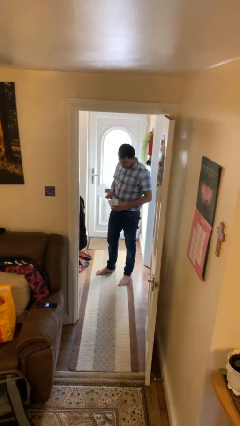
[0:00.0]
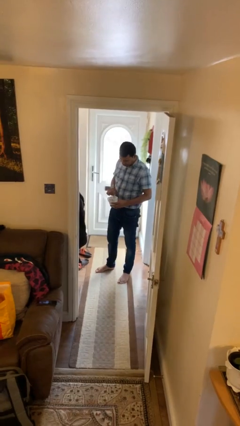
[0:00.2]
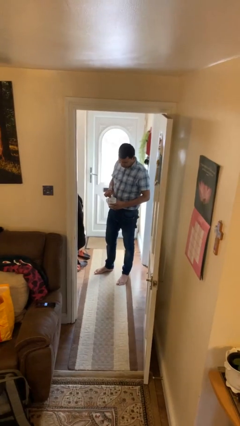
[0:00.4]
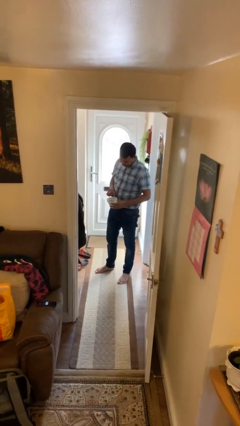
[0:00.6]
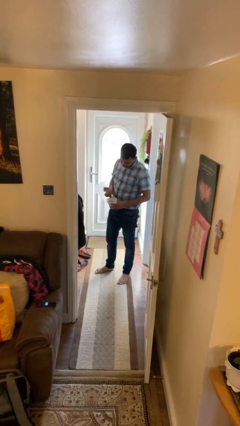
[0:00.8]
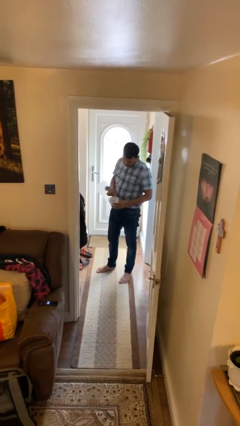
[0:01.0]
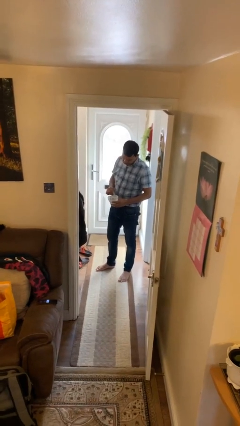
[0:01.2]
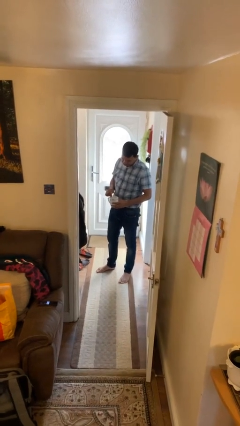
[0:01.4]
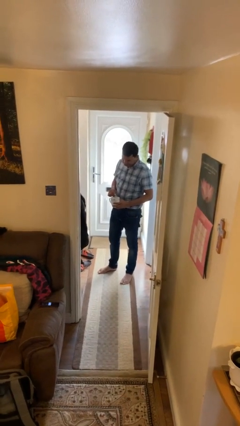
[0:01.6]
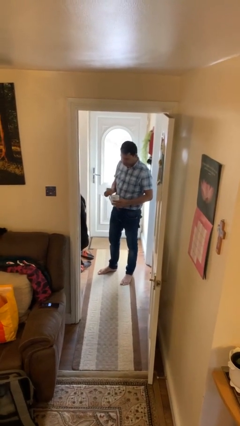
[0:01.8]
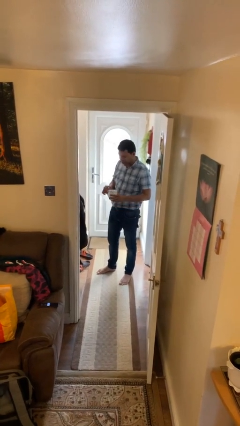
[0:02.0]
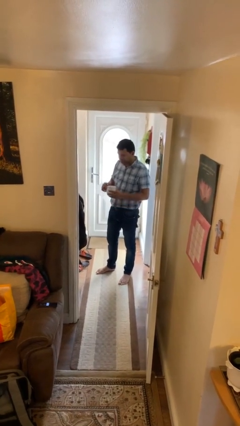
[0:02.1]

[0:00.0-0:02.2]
person stirs mug

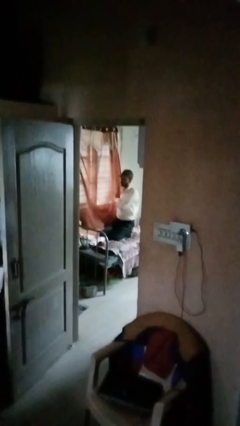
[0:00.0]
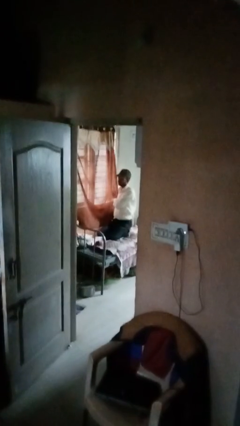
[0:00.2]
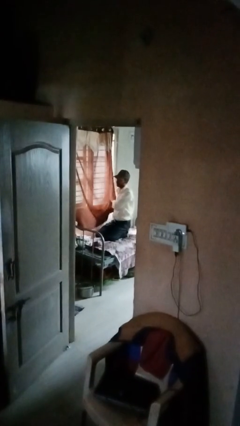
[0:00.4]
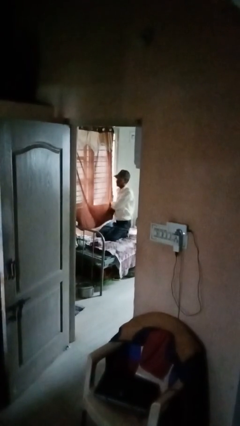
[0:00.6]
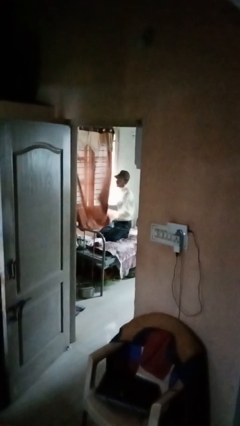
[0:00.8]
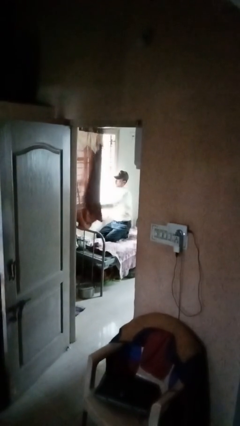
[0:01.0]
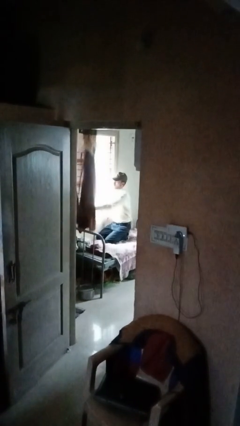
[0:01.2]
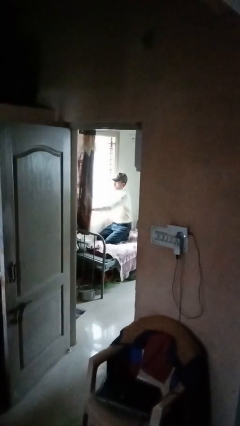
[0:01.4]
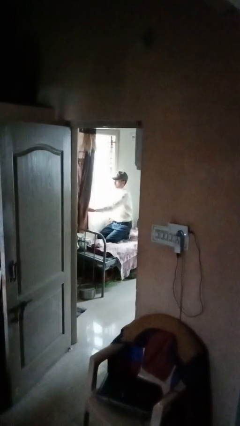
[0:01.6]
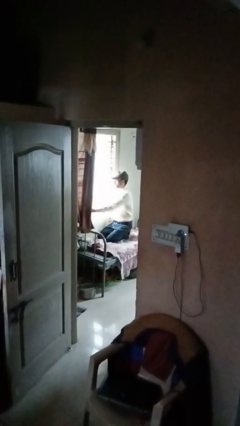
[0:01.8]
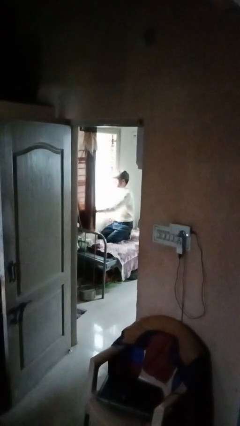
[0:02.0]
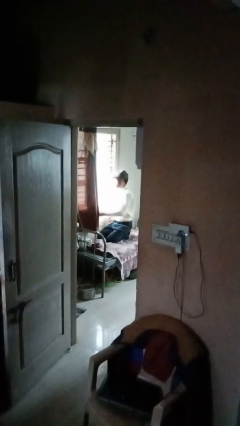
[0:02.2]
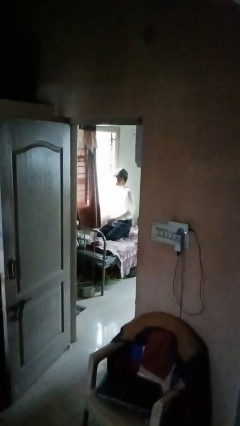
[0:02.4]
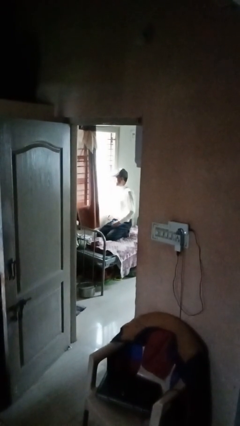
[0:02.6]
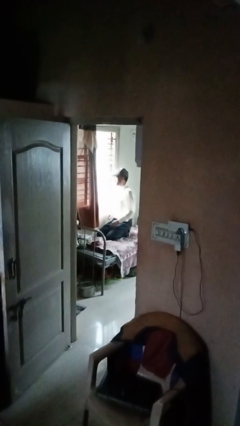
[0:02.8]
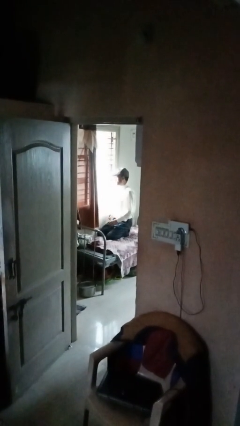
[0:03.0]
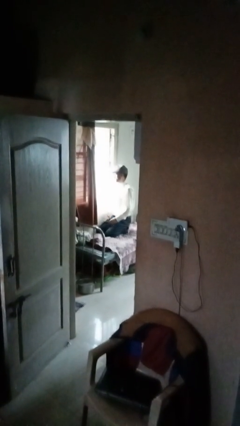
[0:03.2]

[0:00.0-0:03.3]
person opens curtains

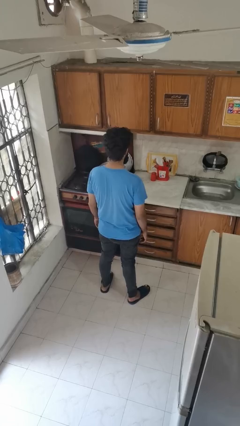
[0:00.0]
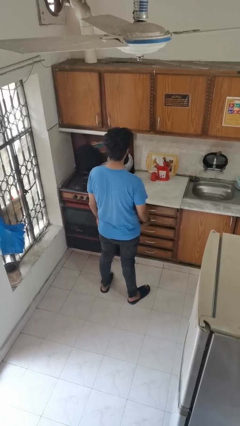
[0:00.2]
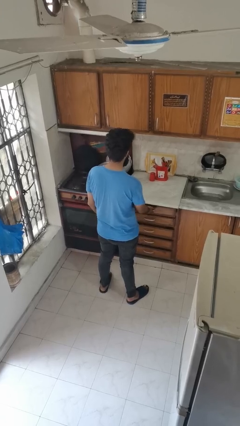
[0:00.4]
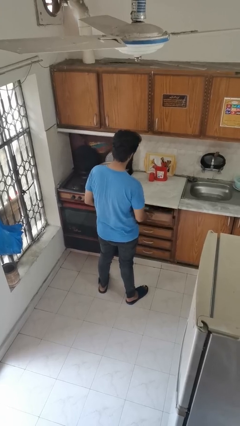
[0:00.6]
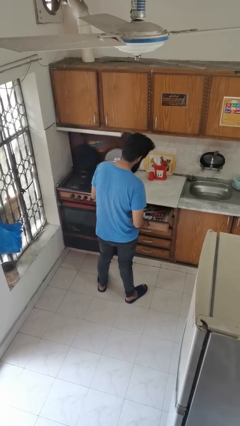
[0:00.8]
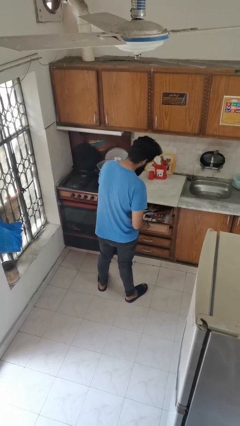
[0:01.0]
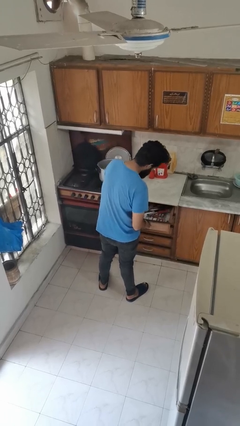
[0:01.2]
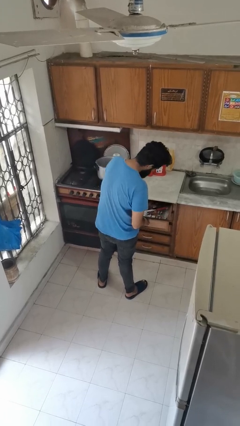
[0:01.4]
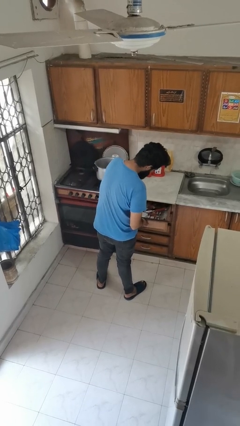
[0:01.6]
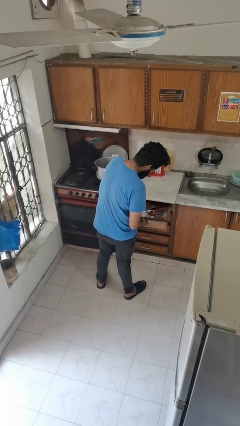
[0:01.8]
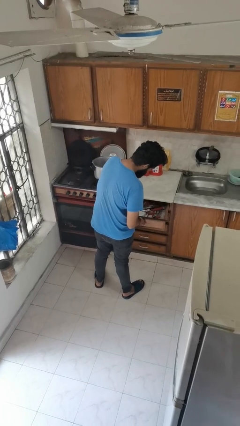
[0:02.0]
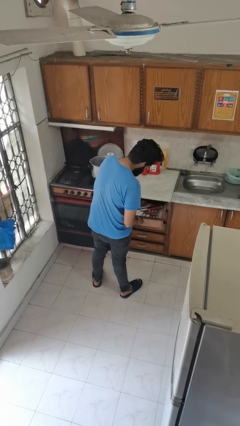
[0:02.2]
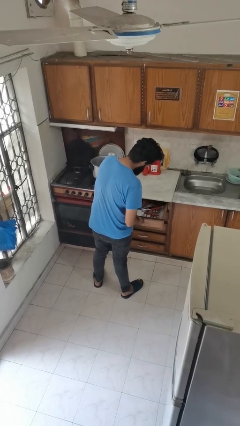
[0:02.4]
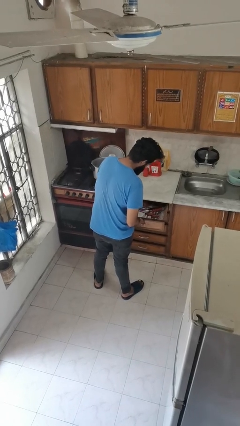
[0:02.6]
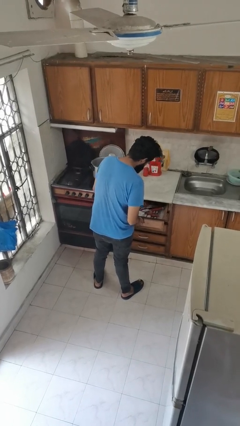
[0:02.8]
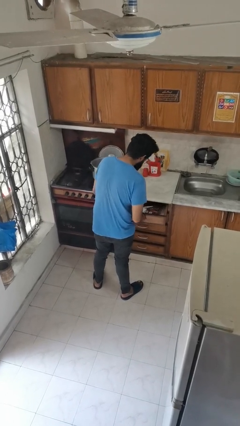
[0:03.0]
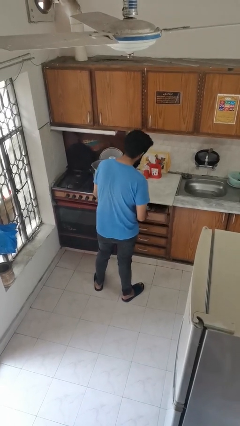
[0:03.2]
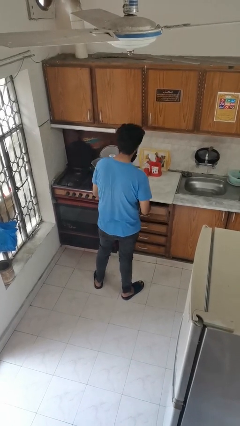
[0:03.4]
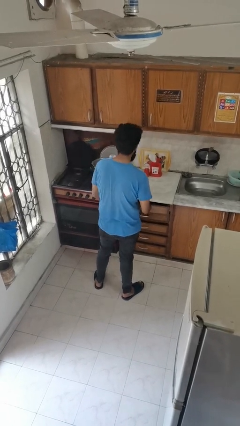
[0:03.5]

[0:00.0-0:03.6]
person searches in kitchen drawer

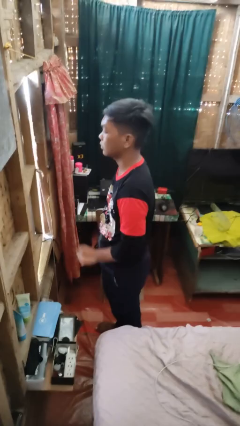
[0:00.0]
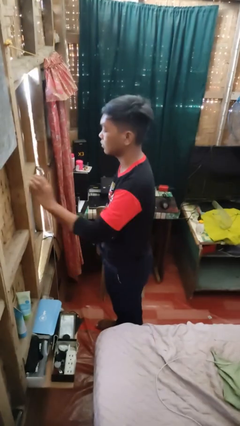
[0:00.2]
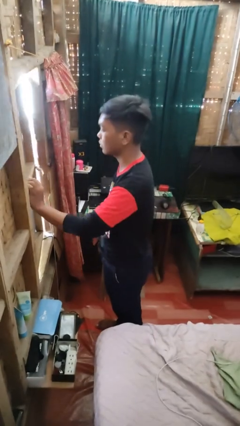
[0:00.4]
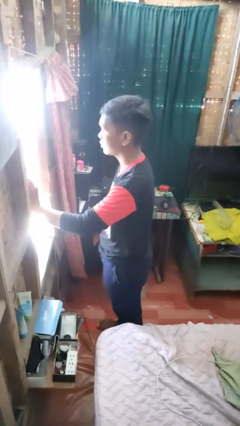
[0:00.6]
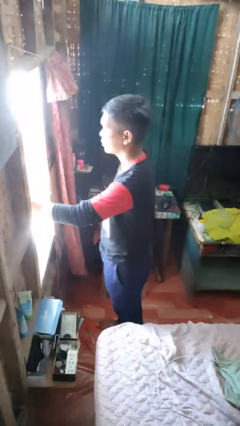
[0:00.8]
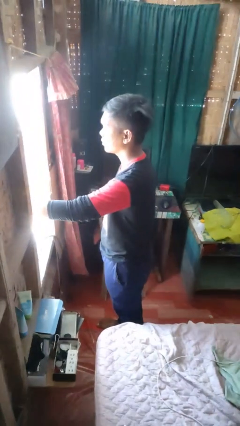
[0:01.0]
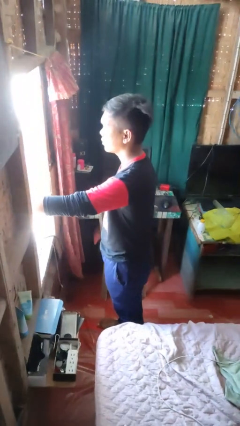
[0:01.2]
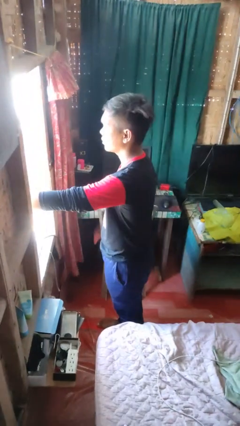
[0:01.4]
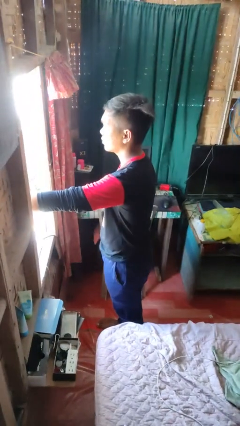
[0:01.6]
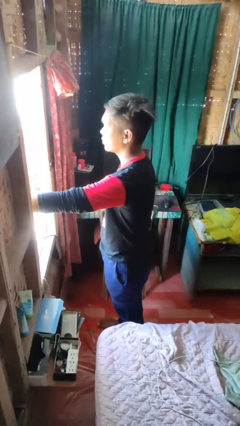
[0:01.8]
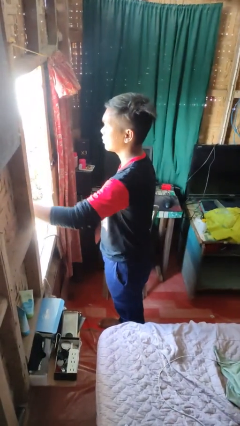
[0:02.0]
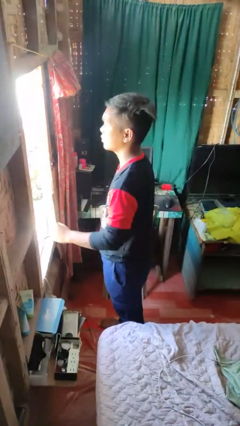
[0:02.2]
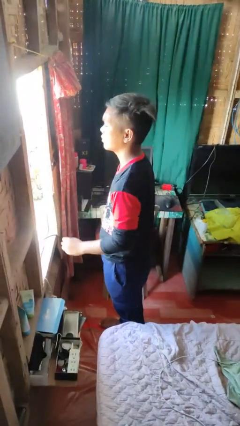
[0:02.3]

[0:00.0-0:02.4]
person opens home window

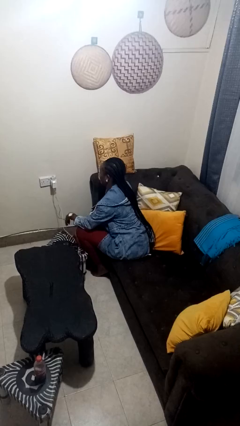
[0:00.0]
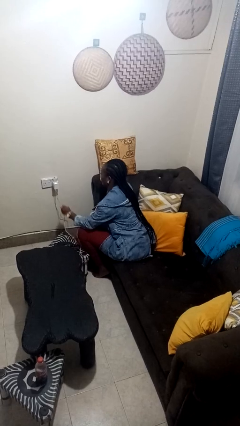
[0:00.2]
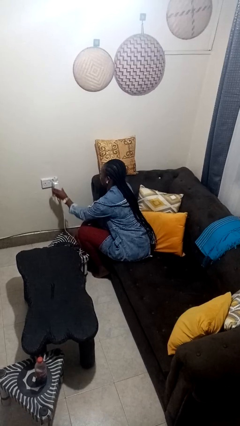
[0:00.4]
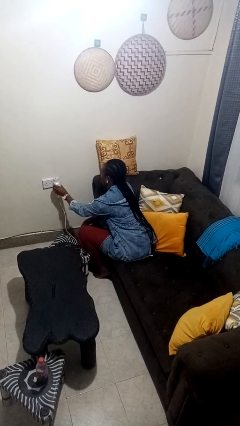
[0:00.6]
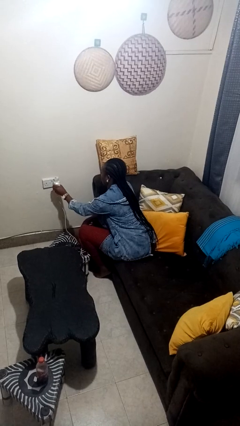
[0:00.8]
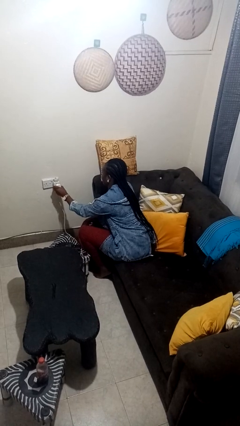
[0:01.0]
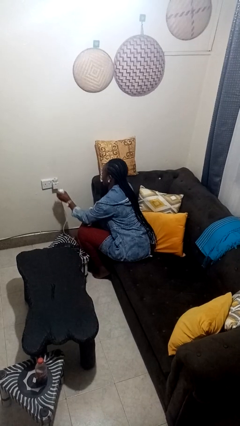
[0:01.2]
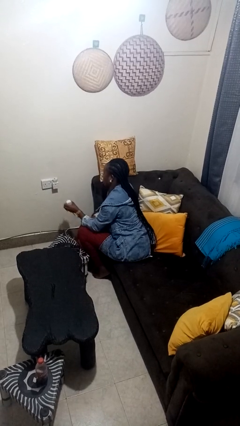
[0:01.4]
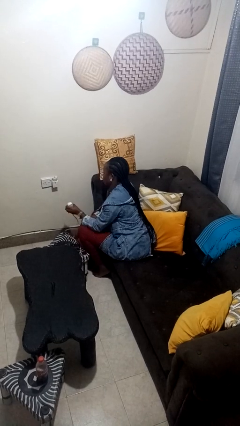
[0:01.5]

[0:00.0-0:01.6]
person unplugs from electrical socket

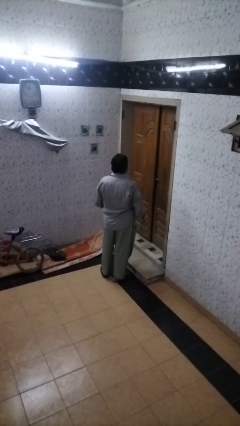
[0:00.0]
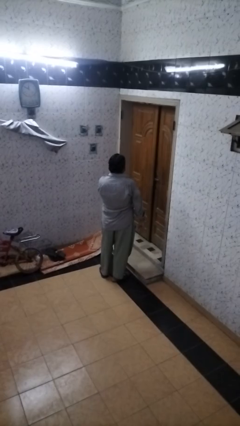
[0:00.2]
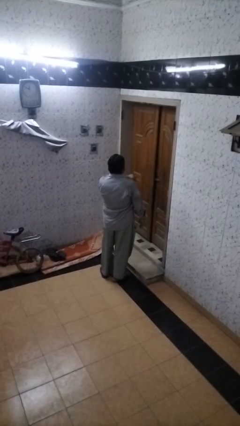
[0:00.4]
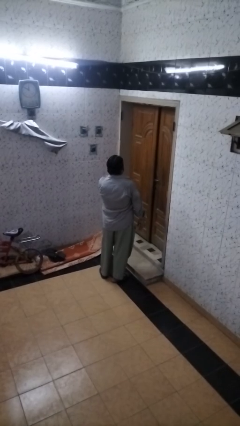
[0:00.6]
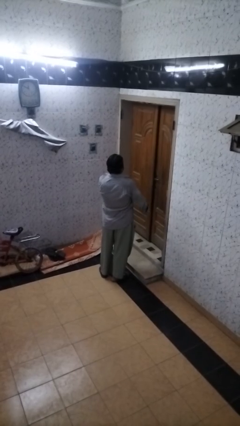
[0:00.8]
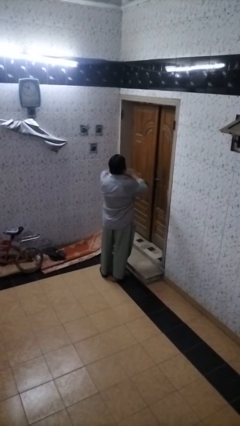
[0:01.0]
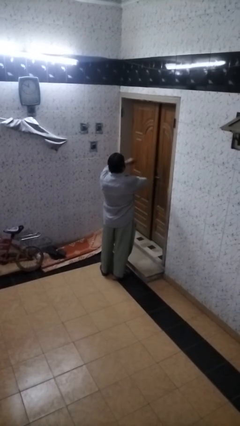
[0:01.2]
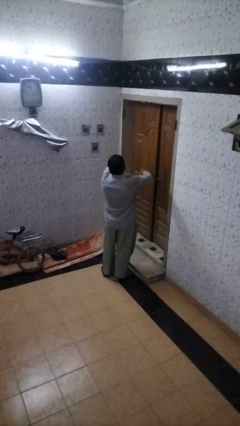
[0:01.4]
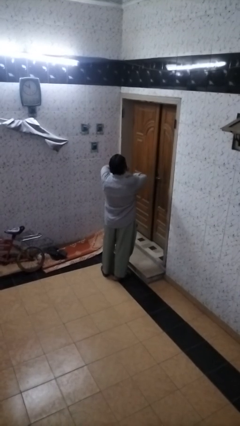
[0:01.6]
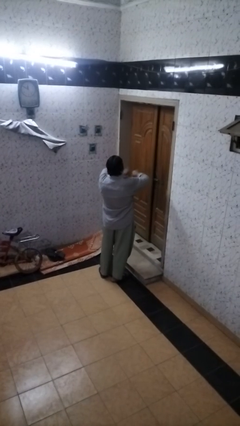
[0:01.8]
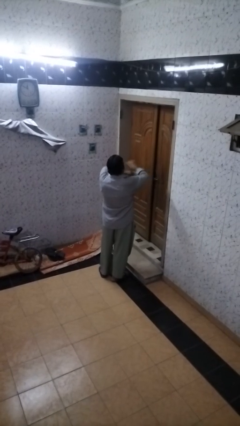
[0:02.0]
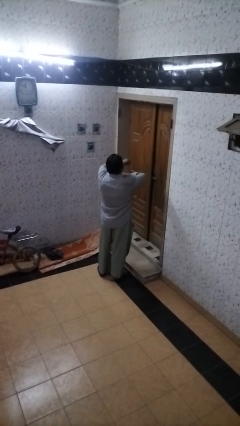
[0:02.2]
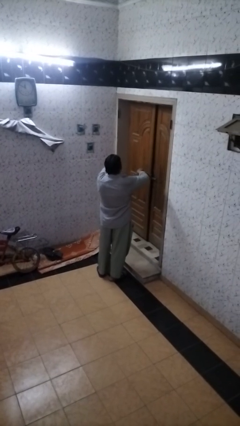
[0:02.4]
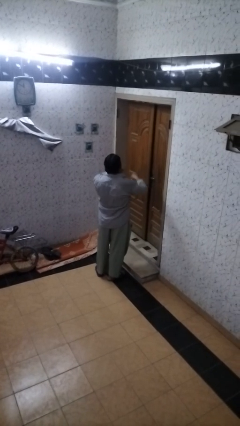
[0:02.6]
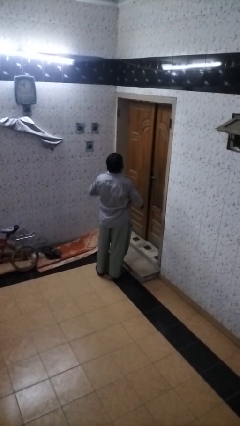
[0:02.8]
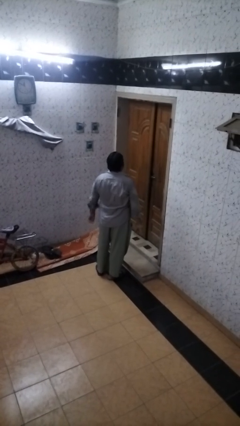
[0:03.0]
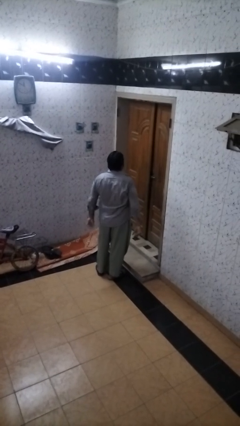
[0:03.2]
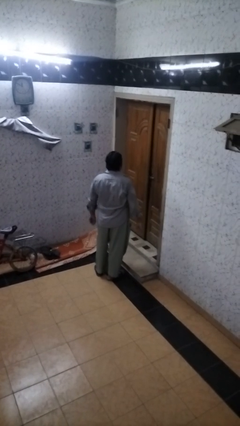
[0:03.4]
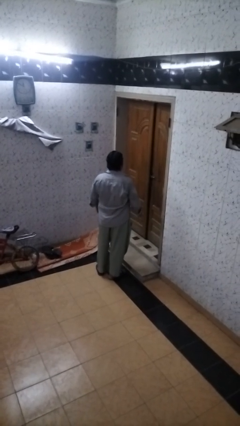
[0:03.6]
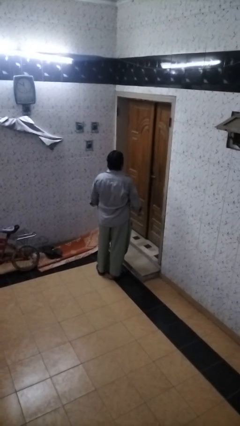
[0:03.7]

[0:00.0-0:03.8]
person drums on chest

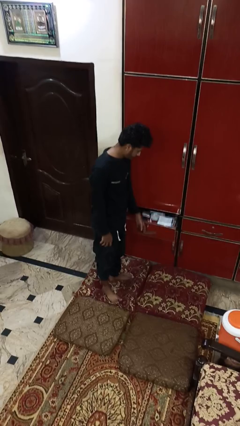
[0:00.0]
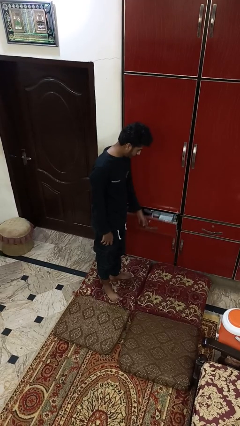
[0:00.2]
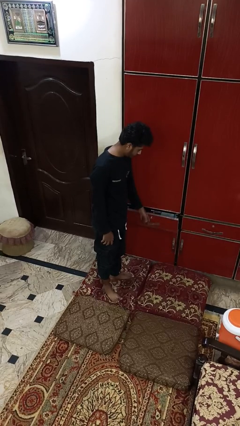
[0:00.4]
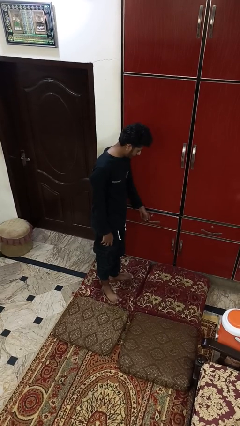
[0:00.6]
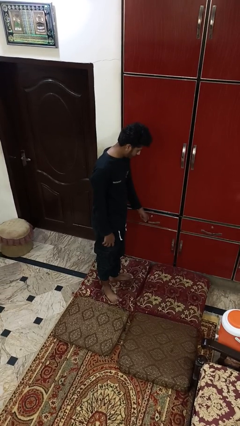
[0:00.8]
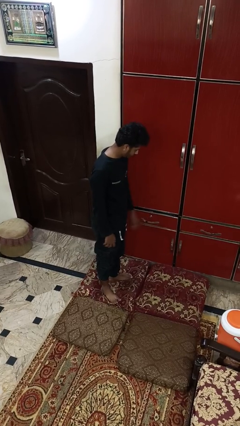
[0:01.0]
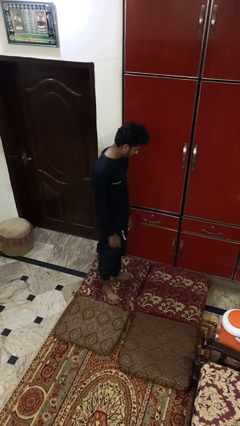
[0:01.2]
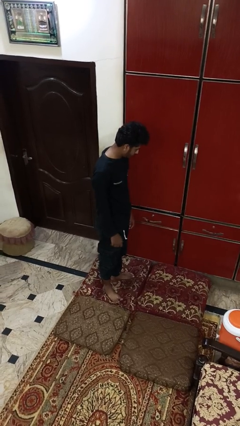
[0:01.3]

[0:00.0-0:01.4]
person closes dresser drawer
